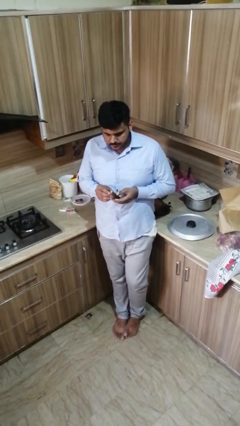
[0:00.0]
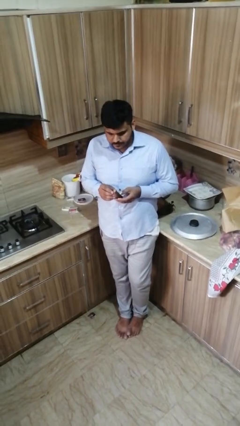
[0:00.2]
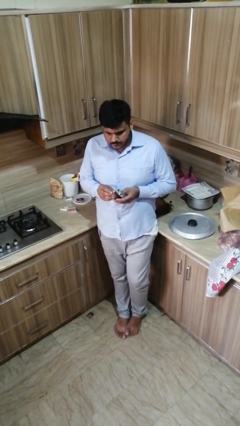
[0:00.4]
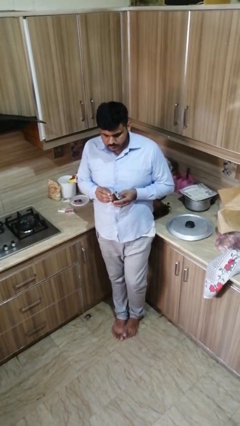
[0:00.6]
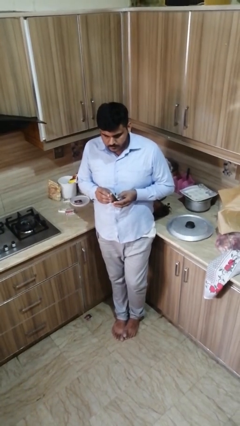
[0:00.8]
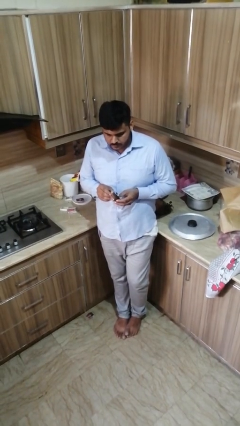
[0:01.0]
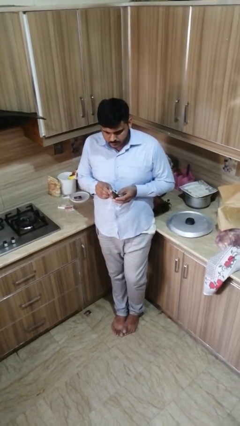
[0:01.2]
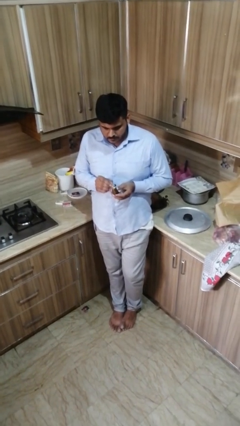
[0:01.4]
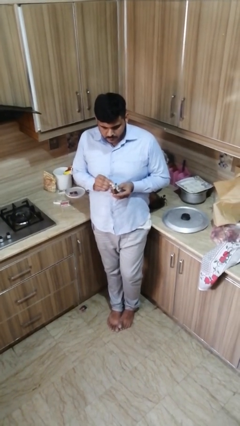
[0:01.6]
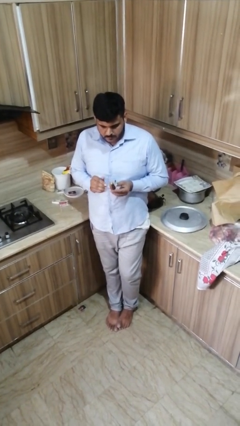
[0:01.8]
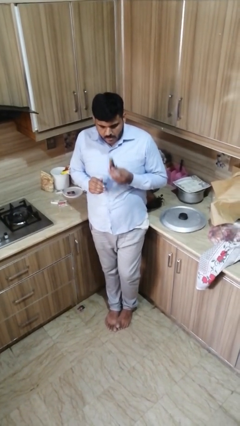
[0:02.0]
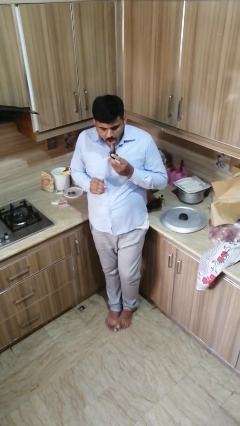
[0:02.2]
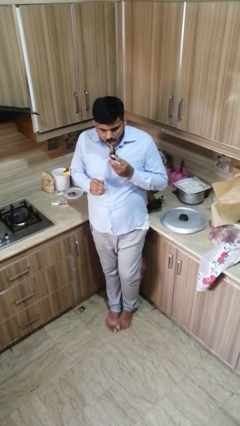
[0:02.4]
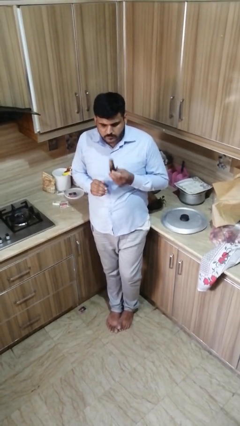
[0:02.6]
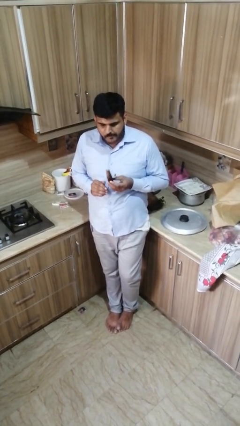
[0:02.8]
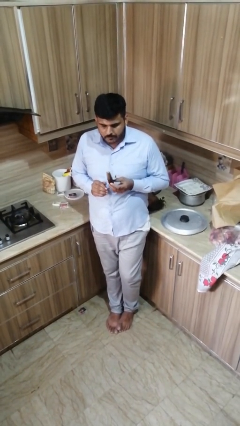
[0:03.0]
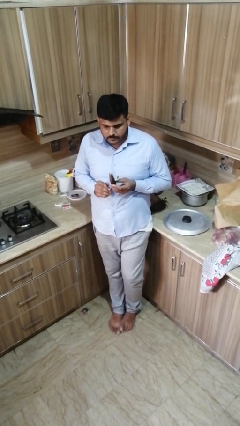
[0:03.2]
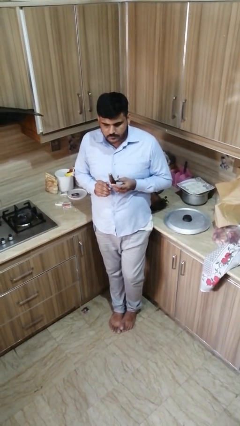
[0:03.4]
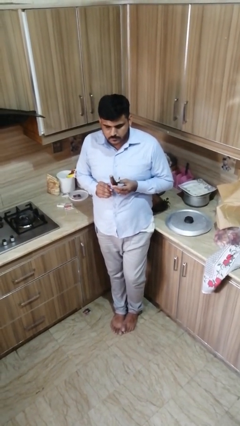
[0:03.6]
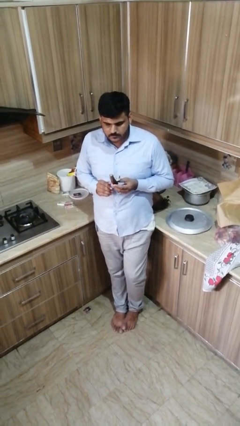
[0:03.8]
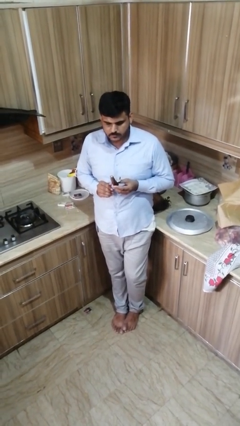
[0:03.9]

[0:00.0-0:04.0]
person eats banana

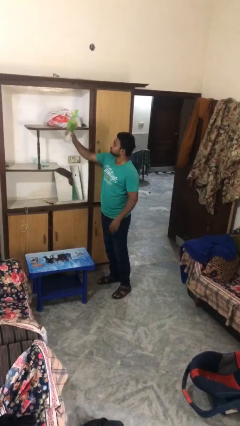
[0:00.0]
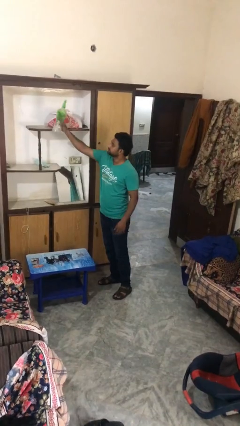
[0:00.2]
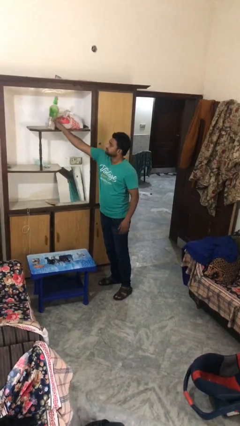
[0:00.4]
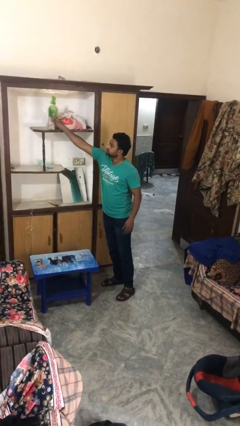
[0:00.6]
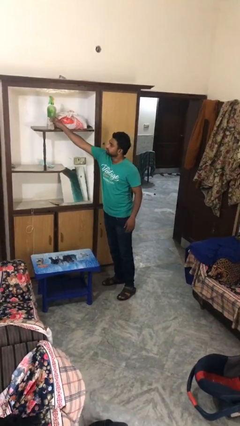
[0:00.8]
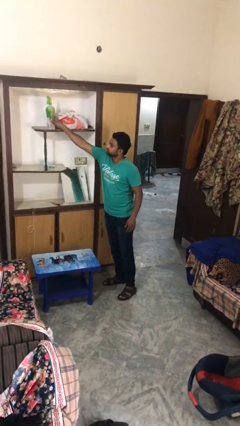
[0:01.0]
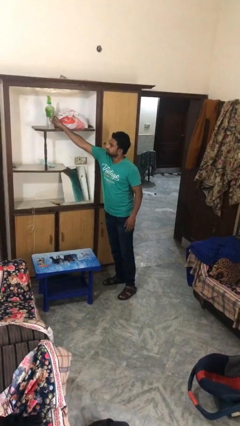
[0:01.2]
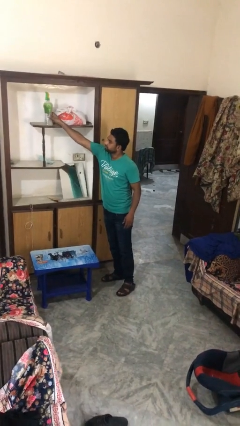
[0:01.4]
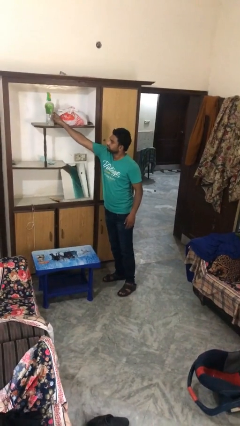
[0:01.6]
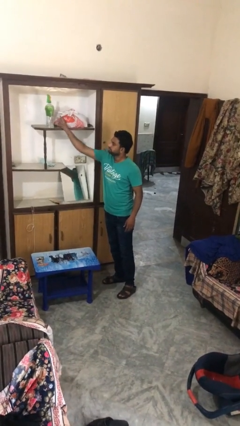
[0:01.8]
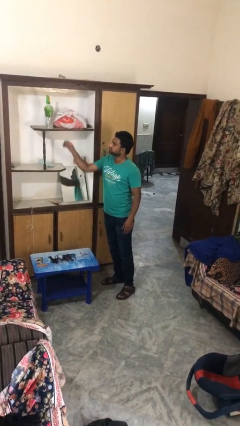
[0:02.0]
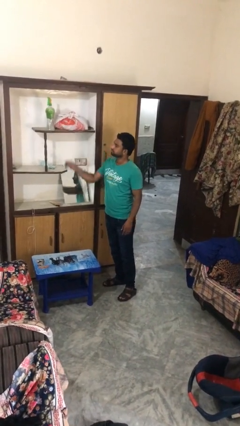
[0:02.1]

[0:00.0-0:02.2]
person puts down object on shelf

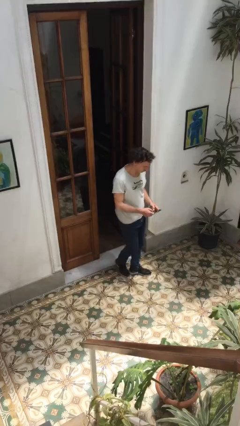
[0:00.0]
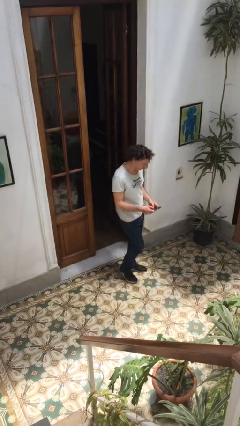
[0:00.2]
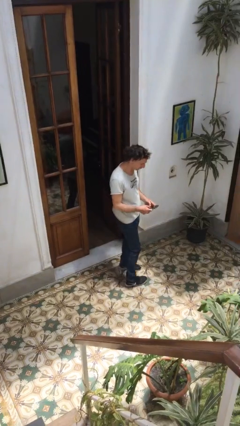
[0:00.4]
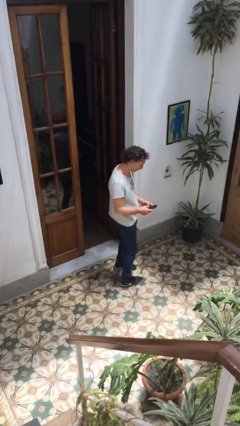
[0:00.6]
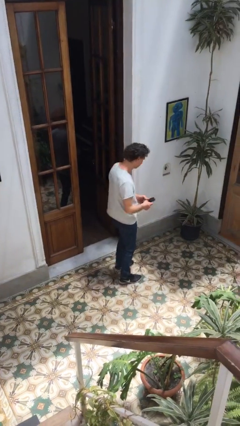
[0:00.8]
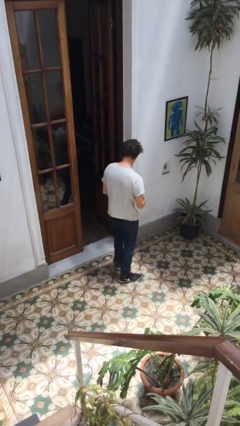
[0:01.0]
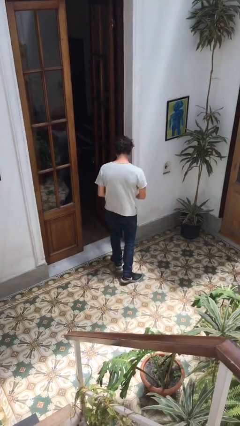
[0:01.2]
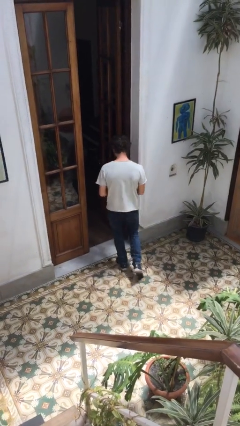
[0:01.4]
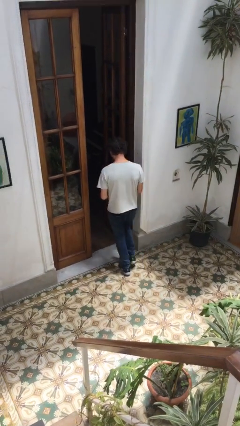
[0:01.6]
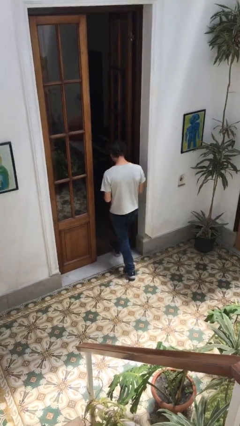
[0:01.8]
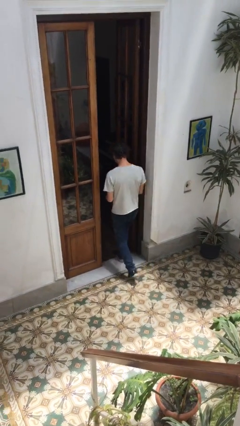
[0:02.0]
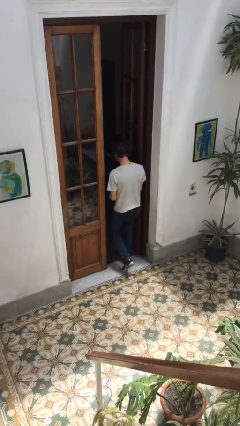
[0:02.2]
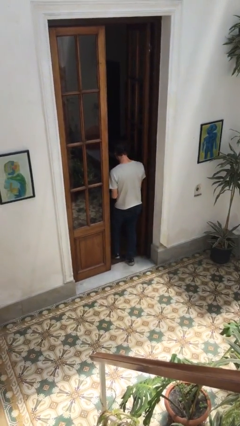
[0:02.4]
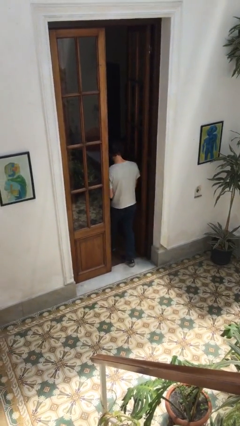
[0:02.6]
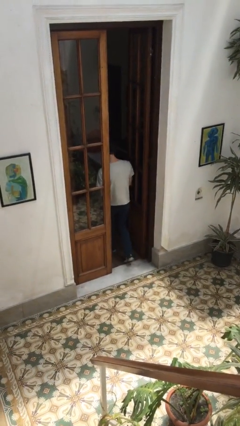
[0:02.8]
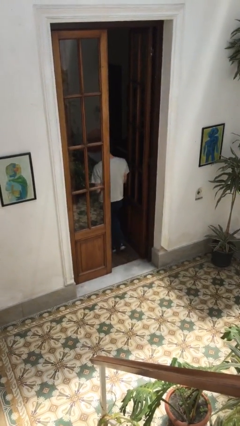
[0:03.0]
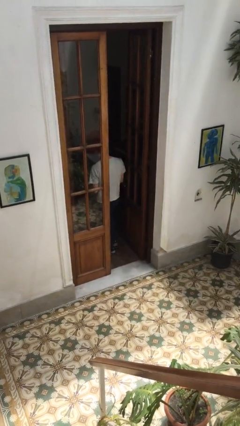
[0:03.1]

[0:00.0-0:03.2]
person exits scene through structure

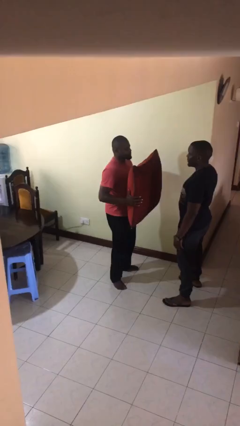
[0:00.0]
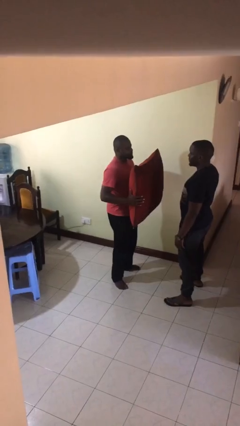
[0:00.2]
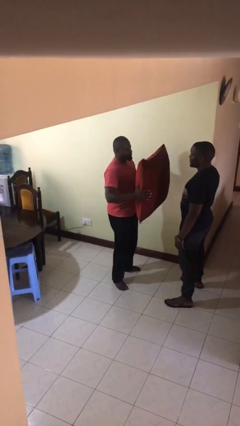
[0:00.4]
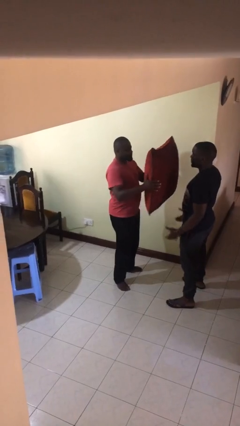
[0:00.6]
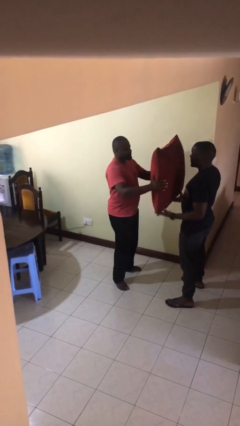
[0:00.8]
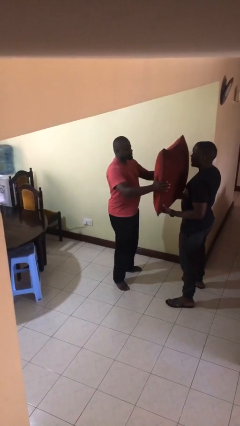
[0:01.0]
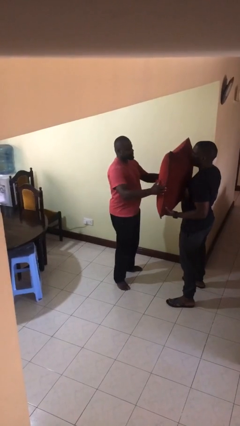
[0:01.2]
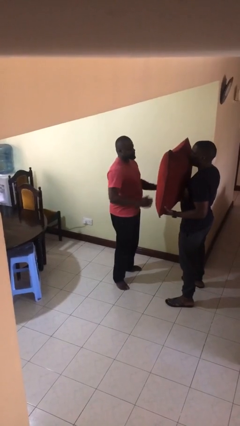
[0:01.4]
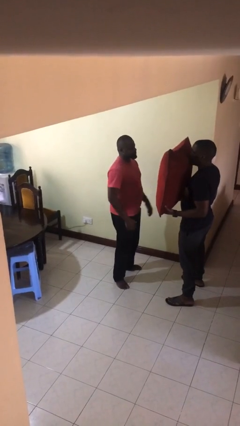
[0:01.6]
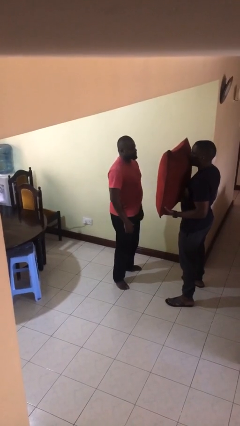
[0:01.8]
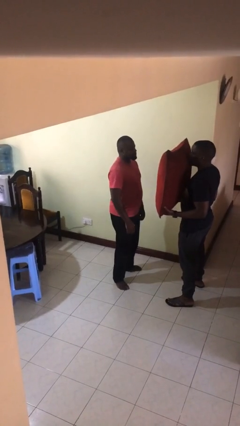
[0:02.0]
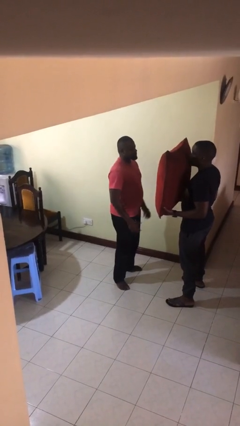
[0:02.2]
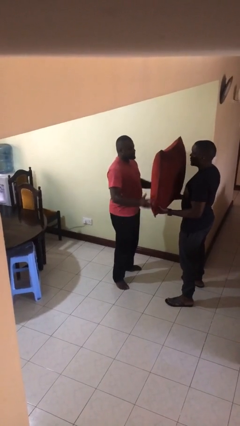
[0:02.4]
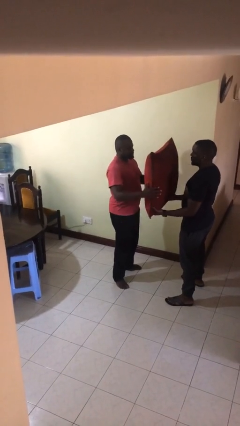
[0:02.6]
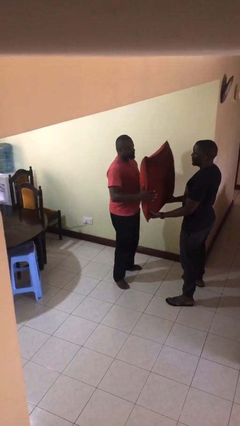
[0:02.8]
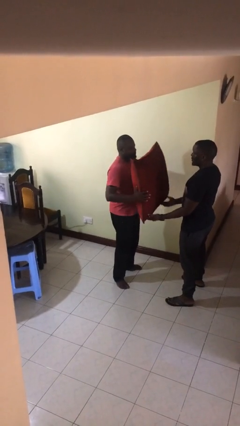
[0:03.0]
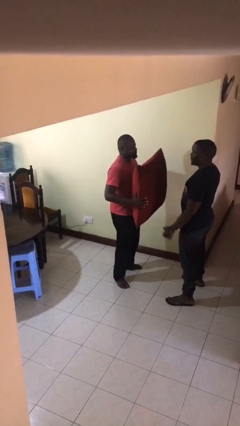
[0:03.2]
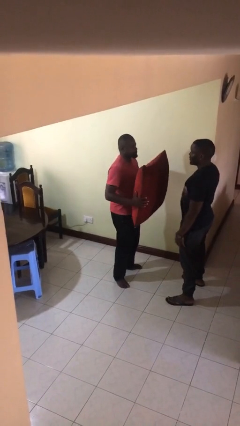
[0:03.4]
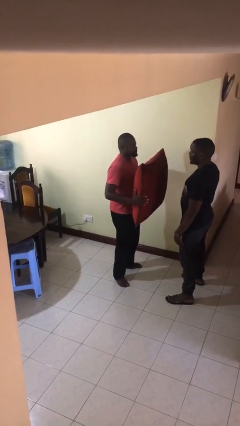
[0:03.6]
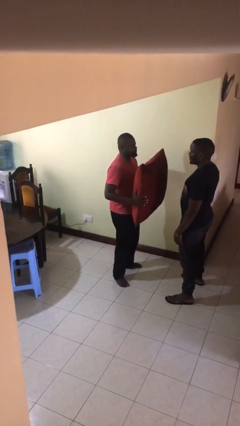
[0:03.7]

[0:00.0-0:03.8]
person transfers object to person

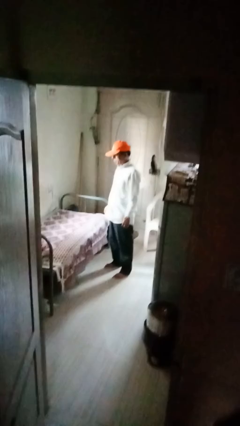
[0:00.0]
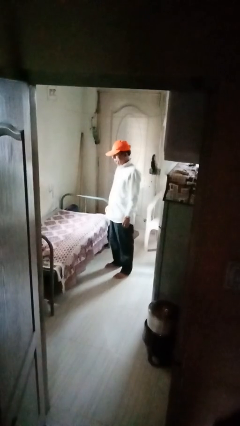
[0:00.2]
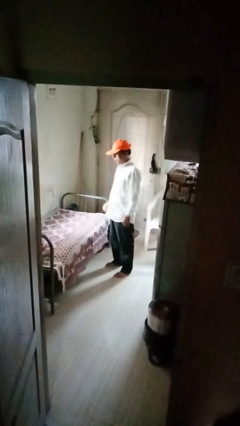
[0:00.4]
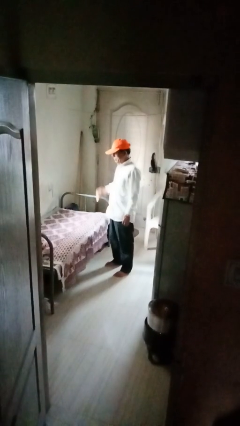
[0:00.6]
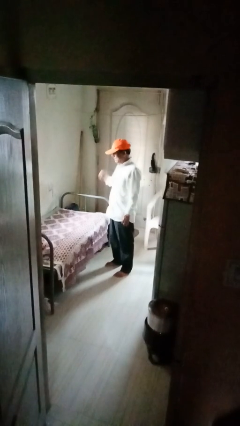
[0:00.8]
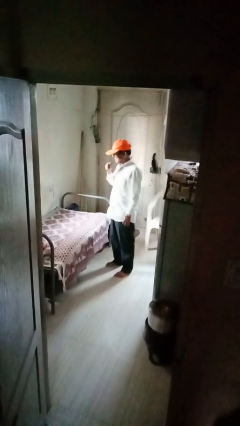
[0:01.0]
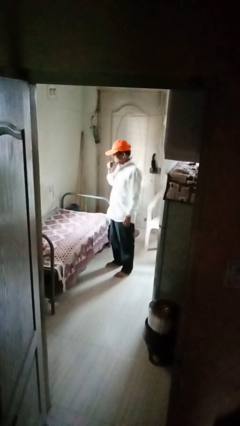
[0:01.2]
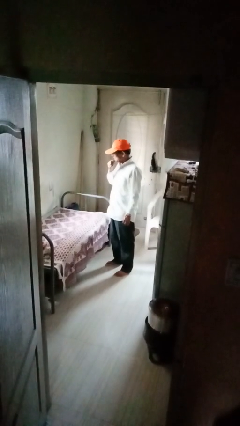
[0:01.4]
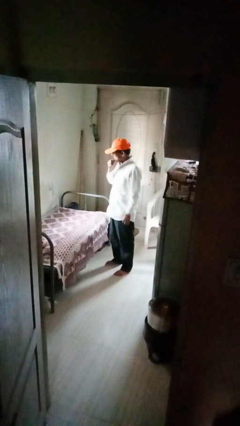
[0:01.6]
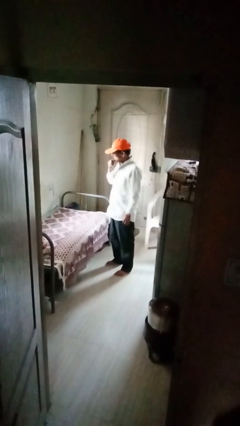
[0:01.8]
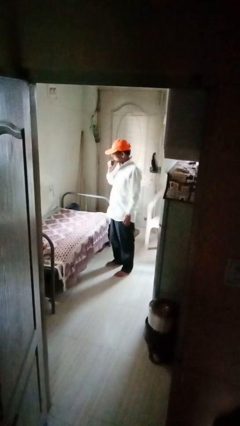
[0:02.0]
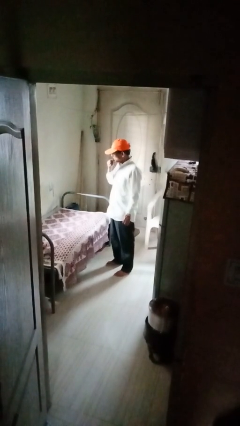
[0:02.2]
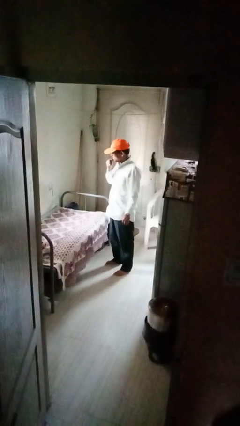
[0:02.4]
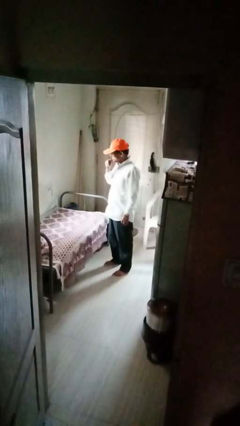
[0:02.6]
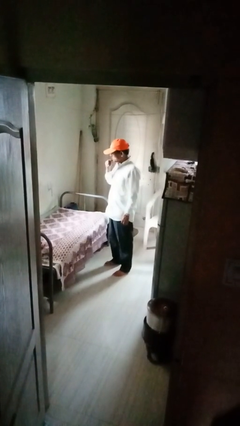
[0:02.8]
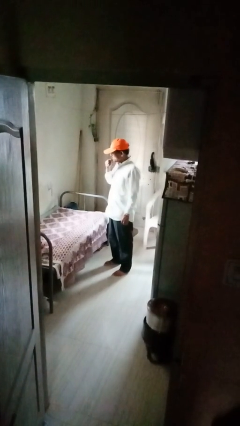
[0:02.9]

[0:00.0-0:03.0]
person flosses

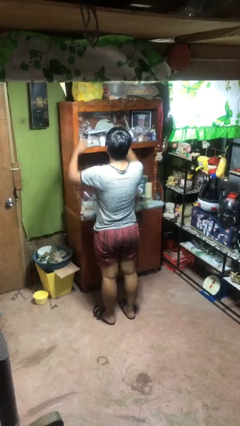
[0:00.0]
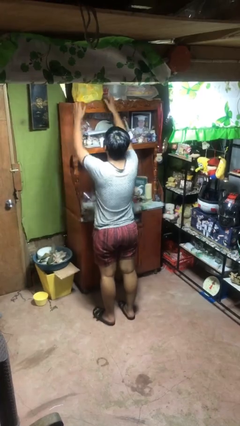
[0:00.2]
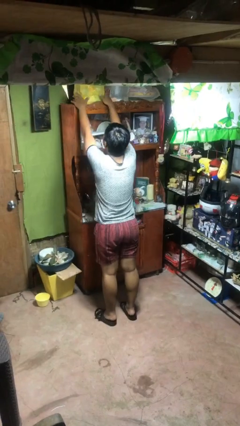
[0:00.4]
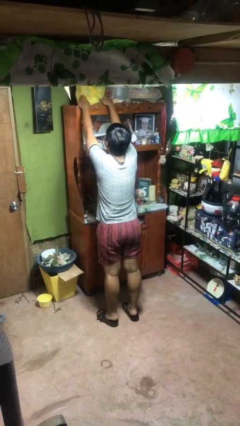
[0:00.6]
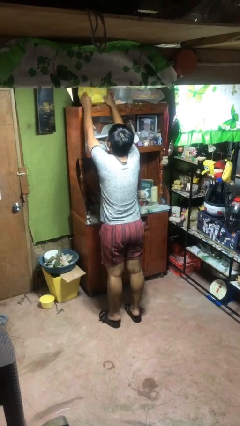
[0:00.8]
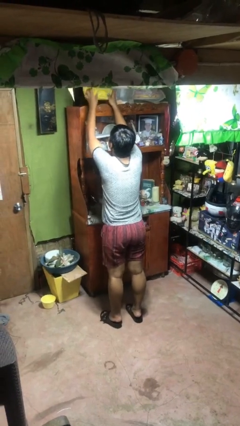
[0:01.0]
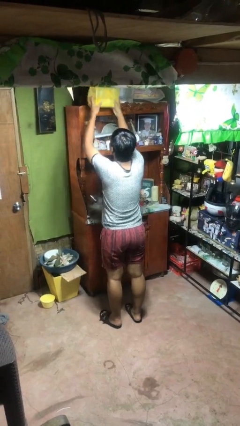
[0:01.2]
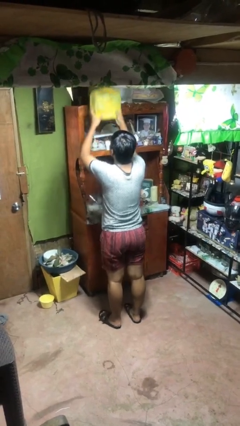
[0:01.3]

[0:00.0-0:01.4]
person picks up object from shelf
